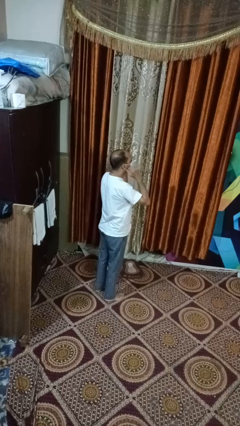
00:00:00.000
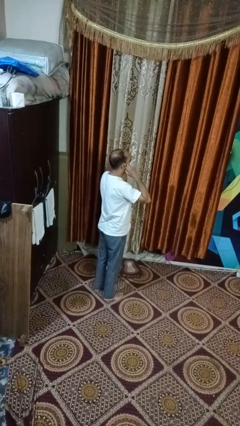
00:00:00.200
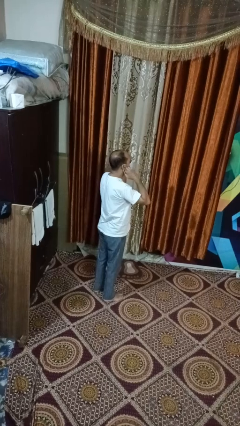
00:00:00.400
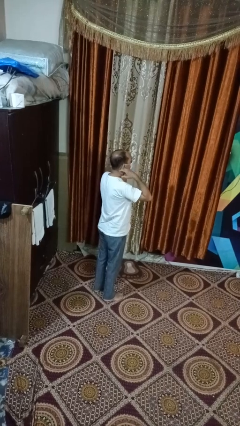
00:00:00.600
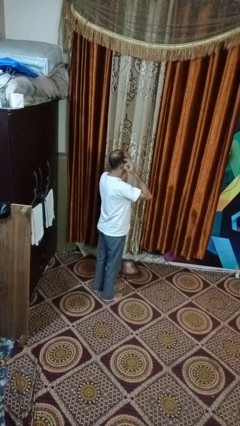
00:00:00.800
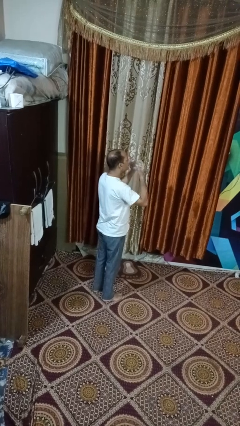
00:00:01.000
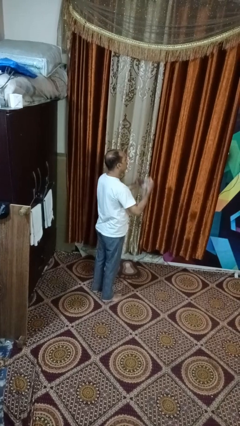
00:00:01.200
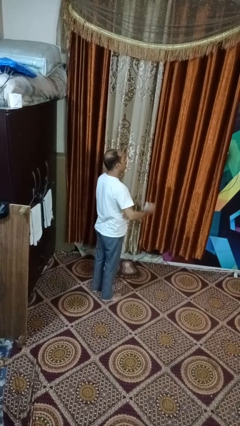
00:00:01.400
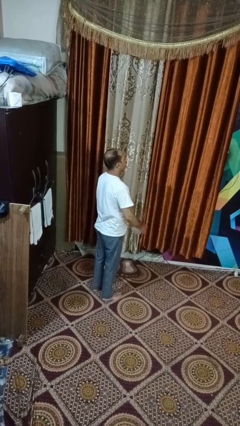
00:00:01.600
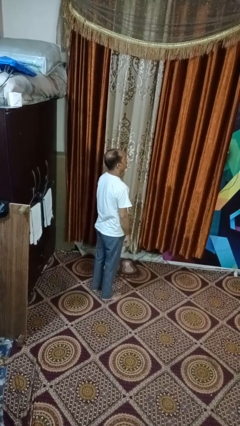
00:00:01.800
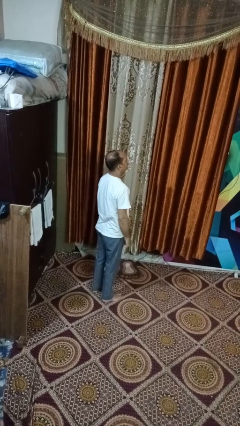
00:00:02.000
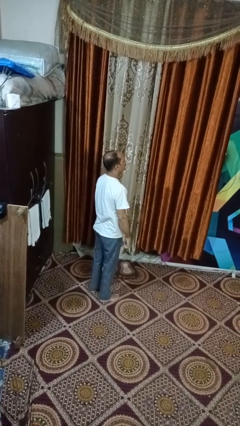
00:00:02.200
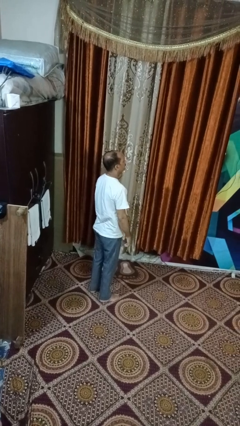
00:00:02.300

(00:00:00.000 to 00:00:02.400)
person takes off facemask

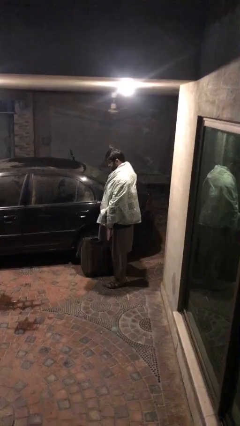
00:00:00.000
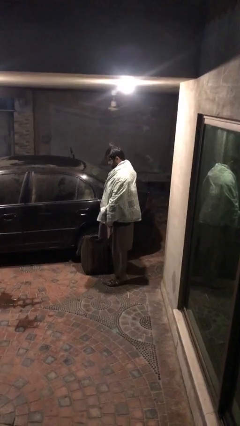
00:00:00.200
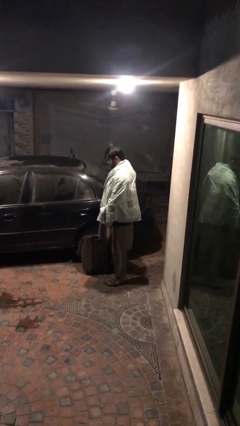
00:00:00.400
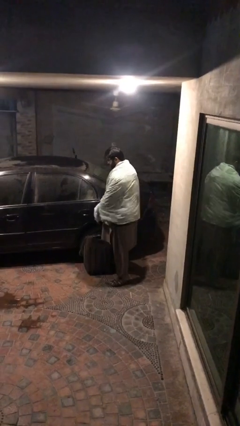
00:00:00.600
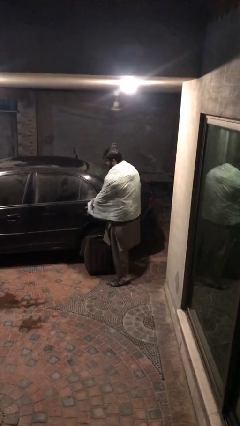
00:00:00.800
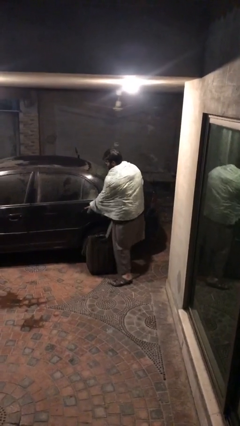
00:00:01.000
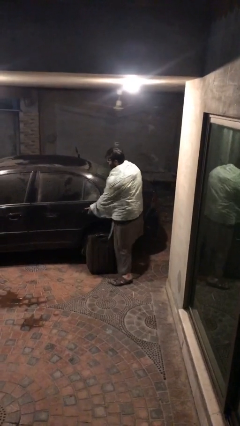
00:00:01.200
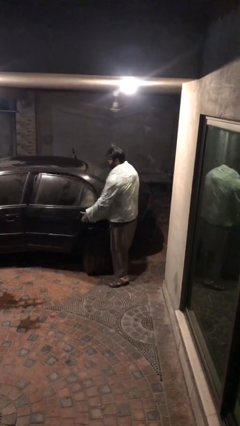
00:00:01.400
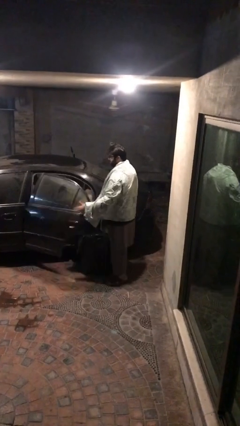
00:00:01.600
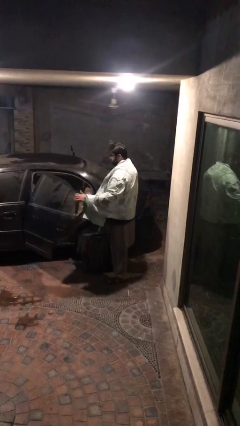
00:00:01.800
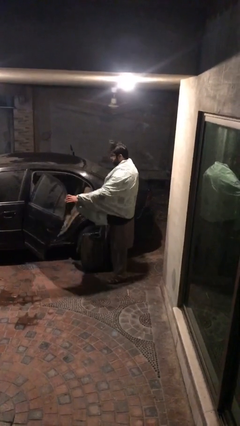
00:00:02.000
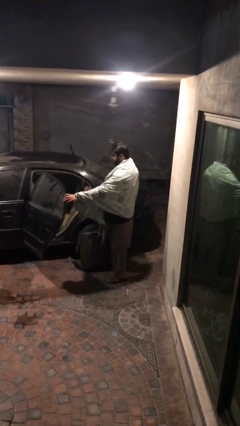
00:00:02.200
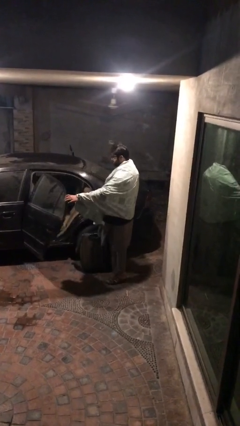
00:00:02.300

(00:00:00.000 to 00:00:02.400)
person opens car door

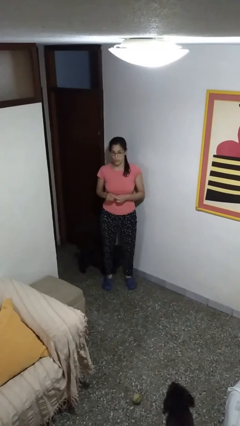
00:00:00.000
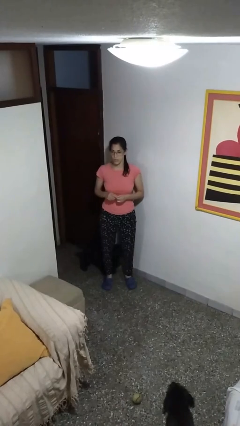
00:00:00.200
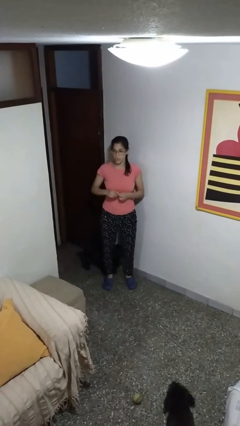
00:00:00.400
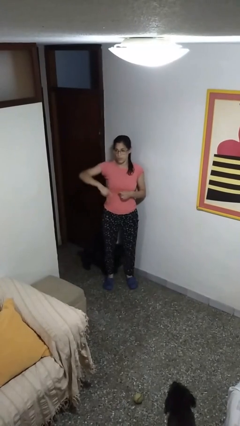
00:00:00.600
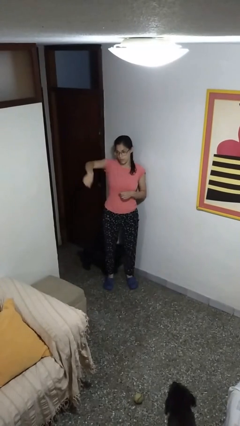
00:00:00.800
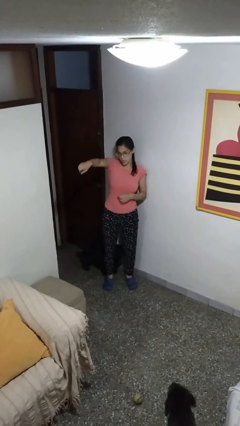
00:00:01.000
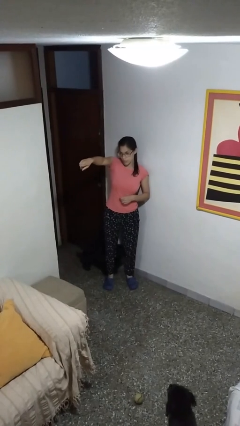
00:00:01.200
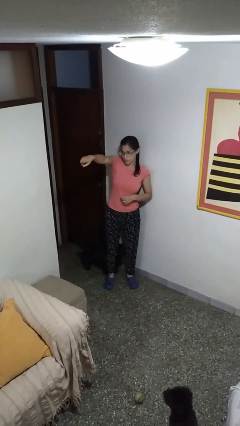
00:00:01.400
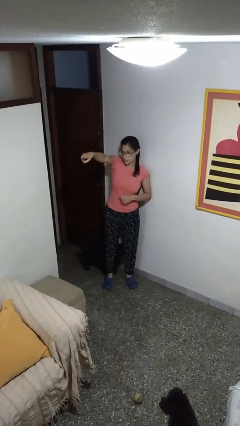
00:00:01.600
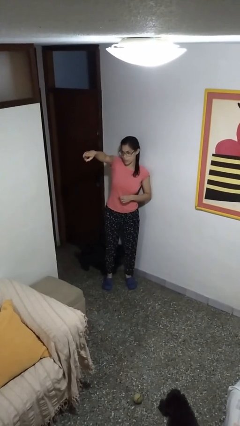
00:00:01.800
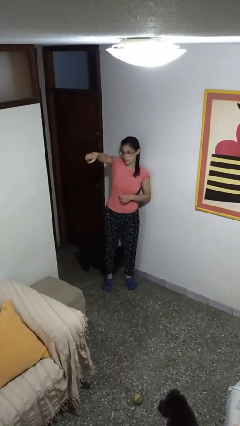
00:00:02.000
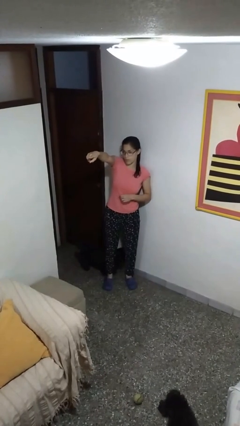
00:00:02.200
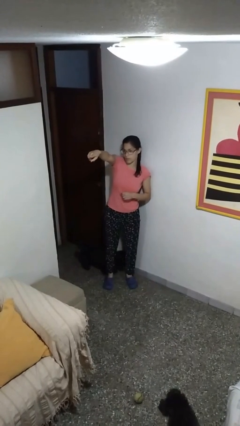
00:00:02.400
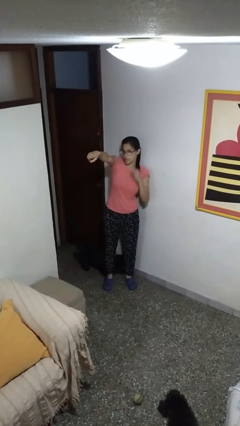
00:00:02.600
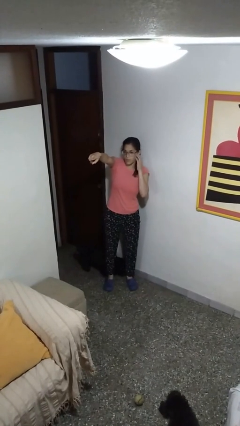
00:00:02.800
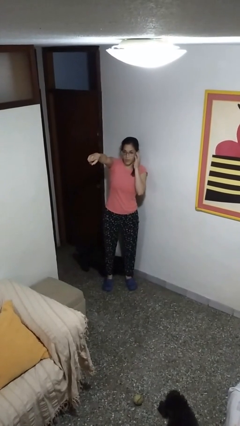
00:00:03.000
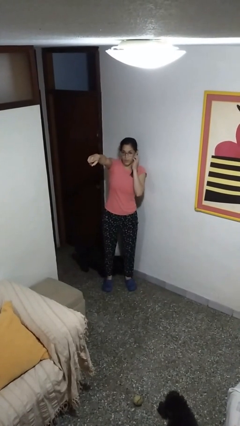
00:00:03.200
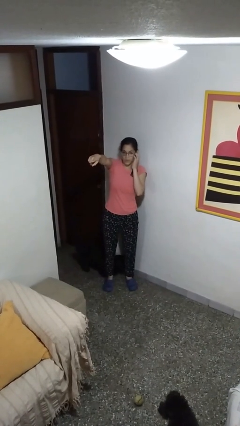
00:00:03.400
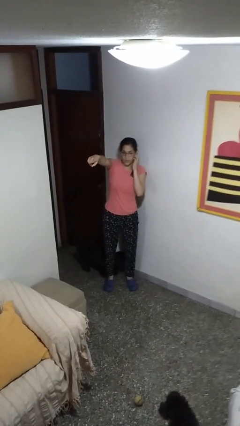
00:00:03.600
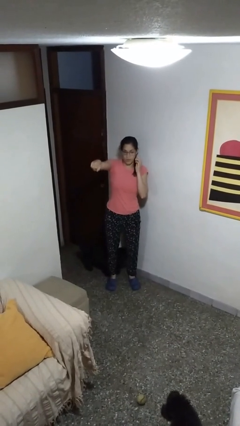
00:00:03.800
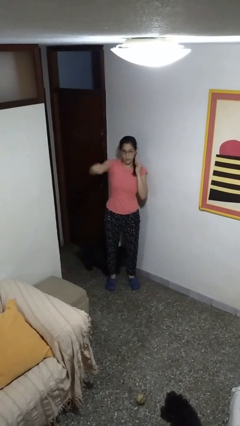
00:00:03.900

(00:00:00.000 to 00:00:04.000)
person points at person

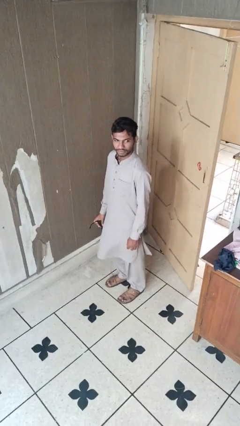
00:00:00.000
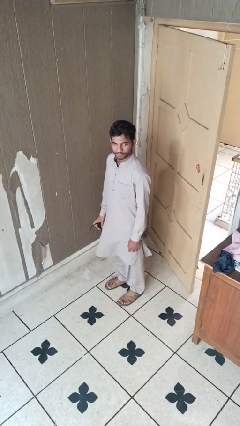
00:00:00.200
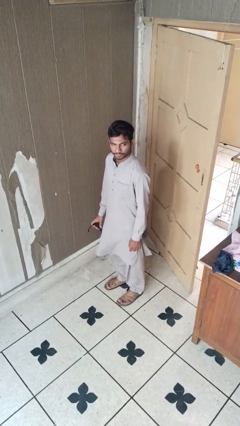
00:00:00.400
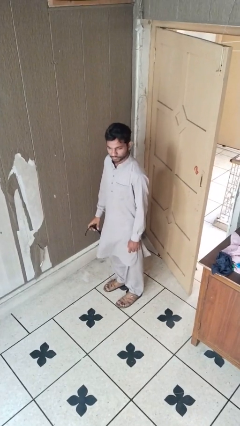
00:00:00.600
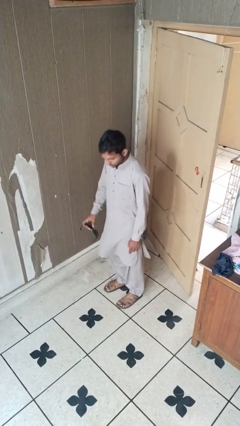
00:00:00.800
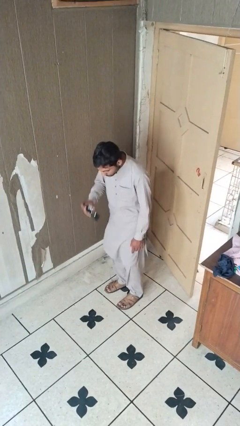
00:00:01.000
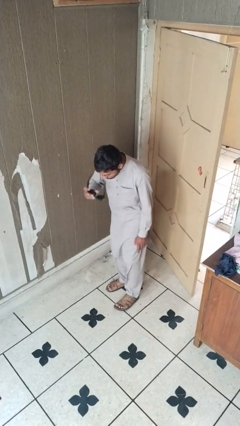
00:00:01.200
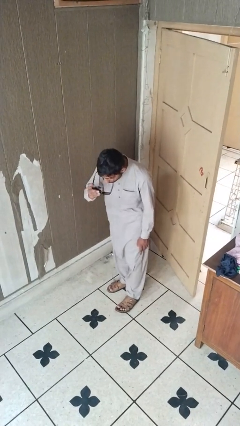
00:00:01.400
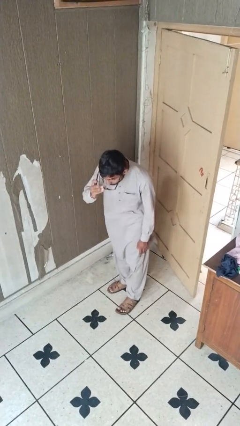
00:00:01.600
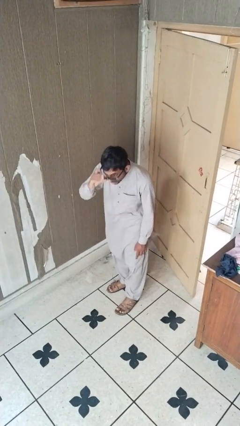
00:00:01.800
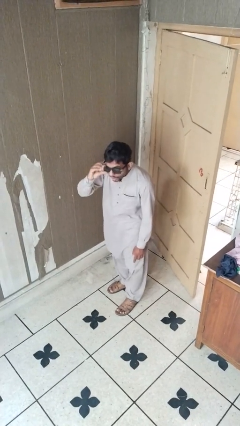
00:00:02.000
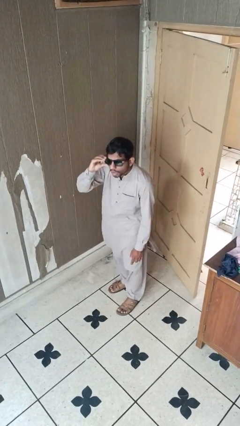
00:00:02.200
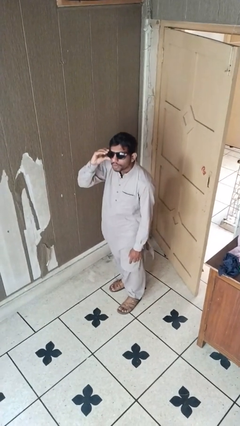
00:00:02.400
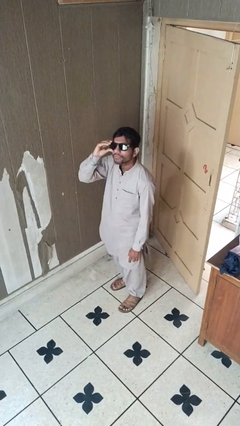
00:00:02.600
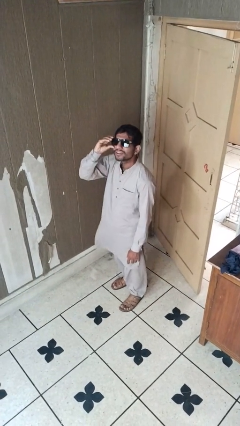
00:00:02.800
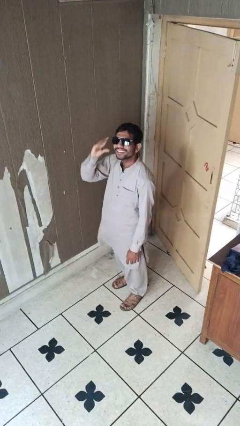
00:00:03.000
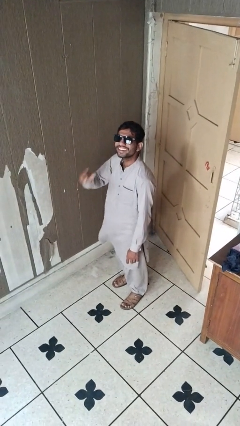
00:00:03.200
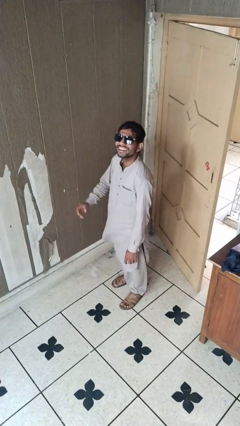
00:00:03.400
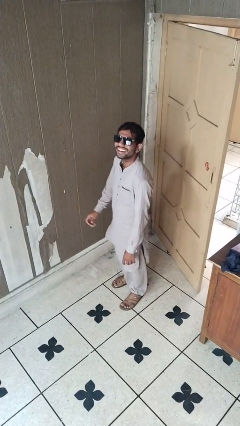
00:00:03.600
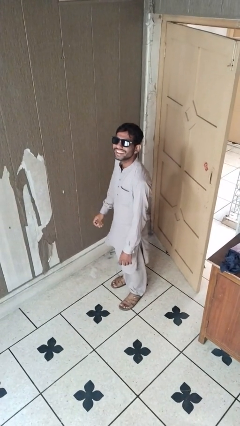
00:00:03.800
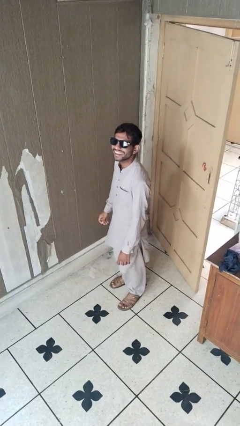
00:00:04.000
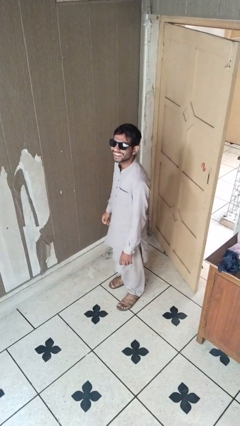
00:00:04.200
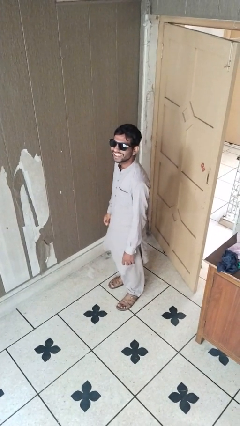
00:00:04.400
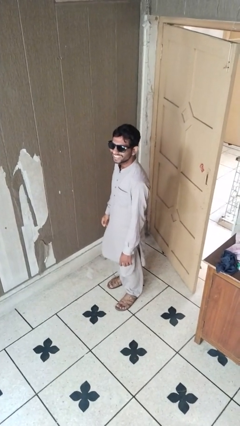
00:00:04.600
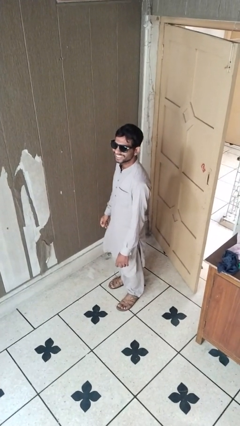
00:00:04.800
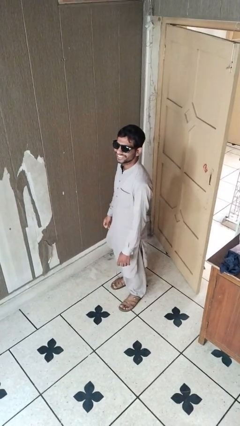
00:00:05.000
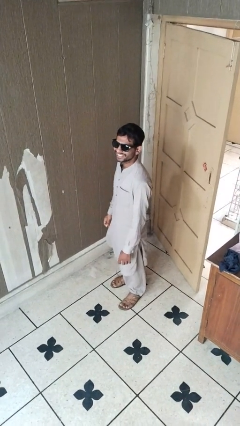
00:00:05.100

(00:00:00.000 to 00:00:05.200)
person puts on sunglasses

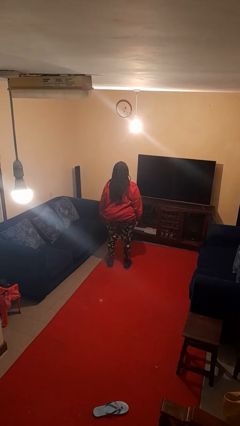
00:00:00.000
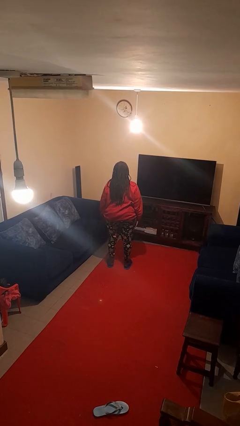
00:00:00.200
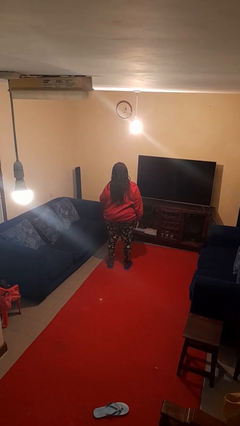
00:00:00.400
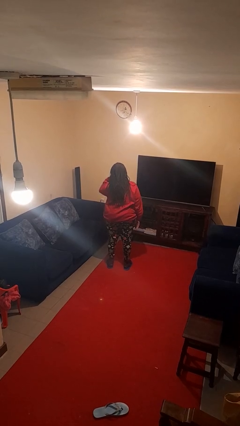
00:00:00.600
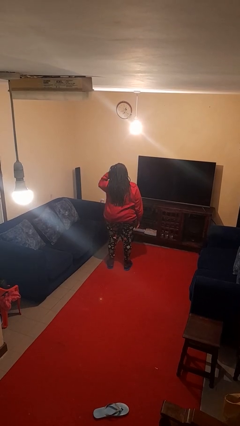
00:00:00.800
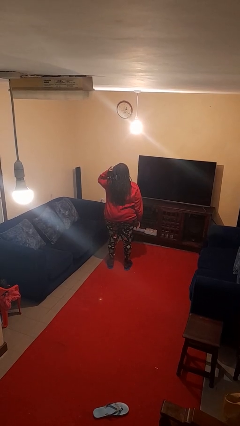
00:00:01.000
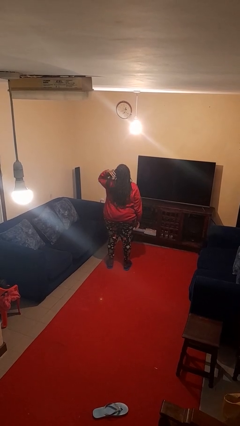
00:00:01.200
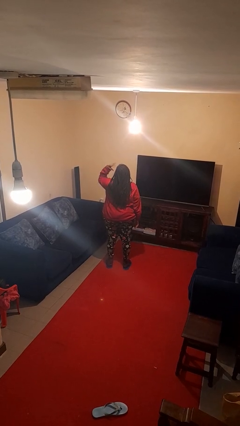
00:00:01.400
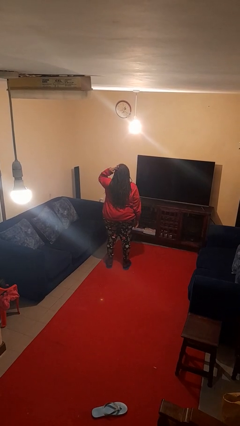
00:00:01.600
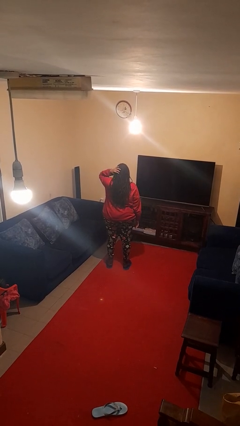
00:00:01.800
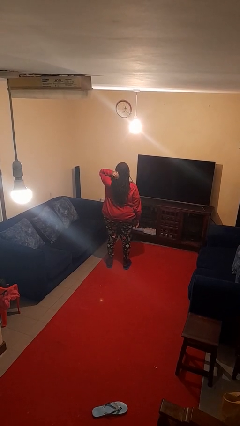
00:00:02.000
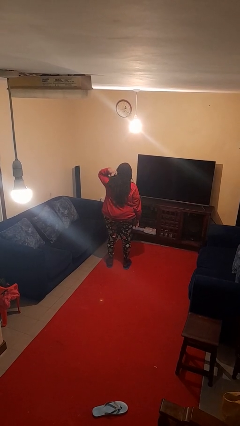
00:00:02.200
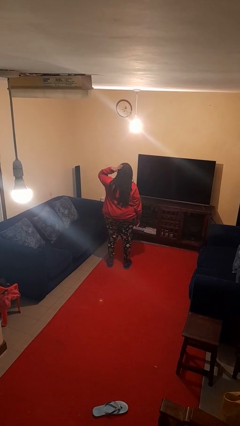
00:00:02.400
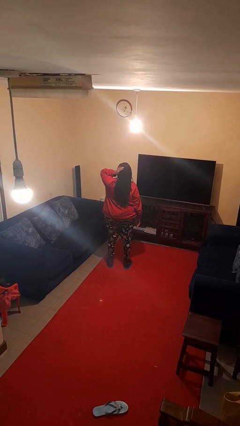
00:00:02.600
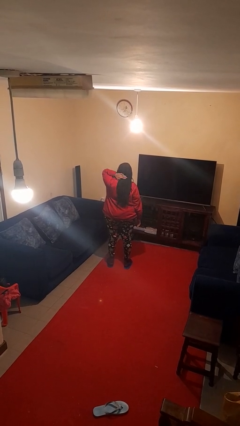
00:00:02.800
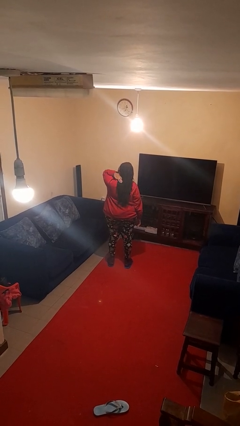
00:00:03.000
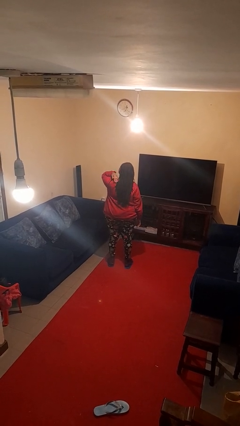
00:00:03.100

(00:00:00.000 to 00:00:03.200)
person strokes hair

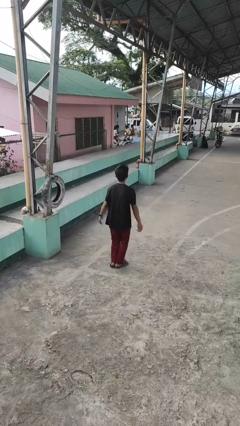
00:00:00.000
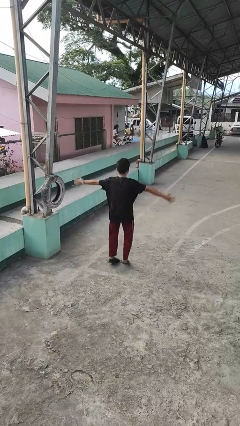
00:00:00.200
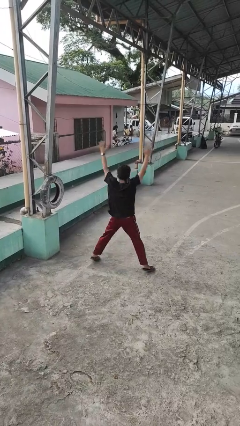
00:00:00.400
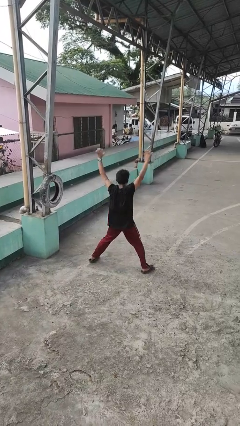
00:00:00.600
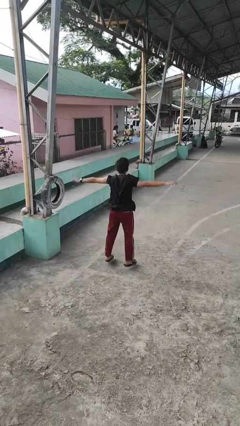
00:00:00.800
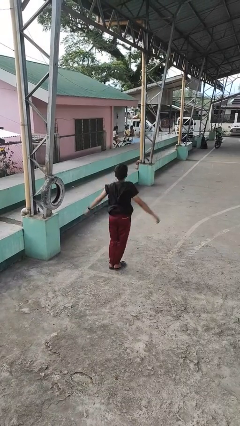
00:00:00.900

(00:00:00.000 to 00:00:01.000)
person exercises with jumping jacks
